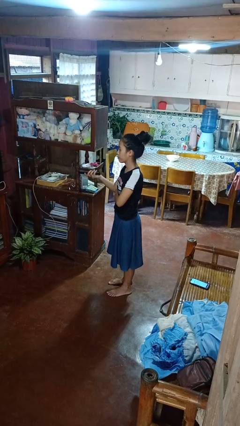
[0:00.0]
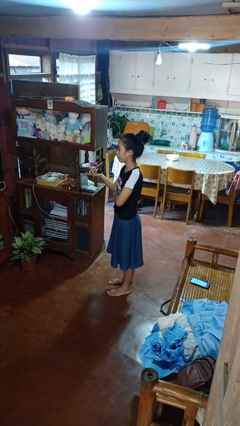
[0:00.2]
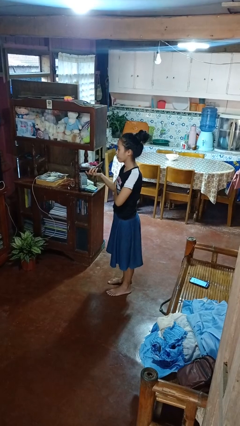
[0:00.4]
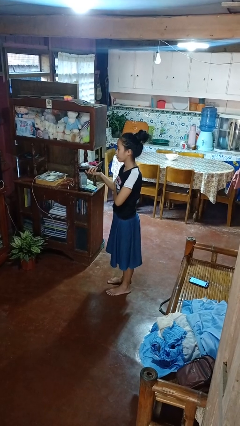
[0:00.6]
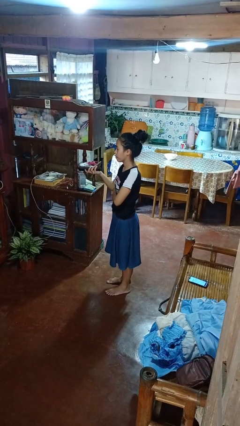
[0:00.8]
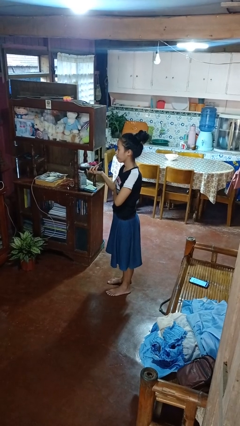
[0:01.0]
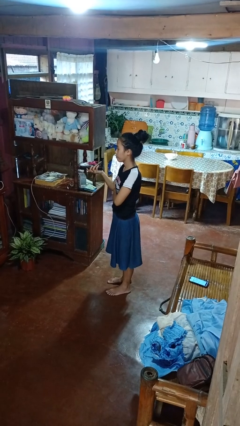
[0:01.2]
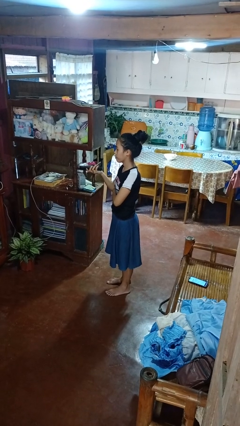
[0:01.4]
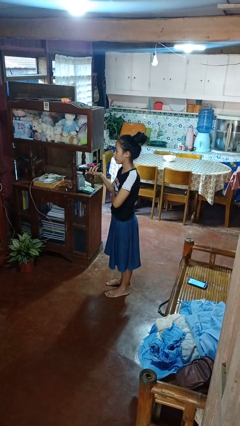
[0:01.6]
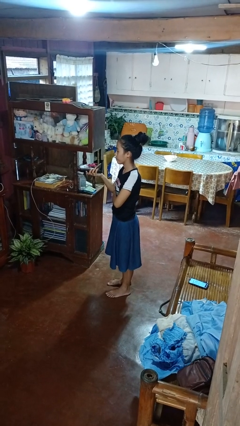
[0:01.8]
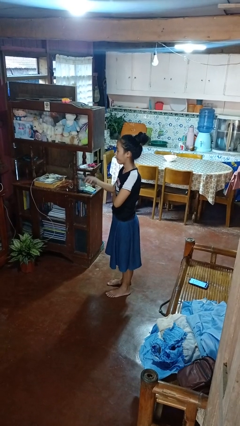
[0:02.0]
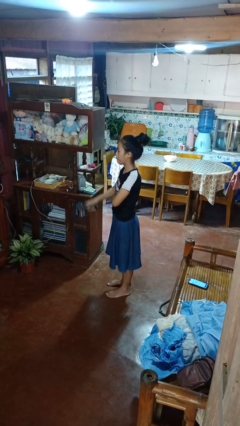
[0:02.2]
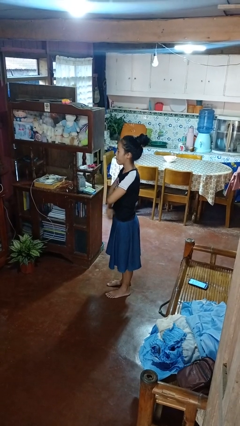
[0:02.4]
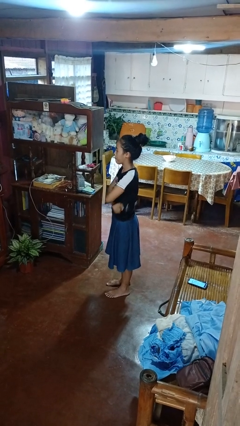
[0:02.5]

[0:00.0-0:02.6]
person uses television remote

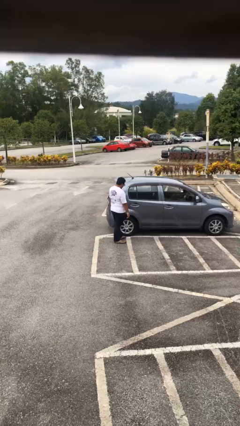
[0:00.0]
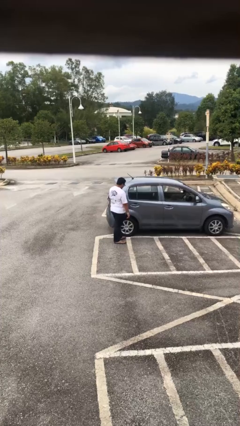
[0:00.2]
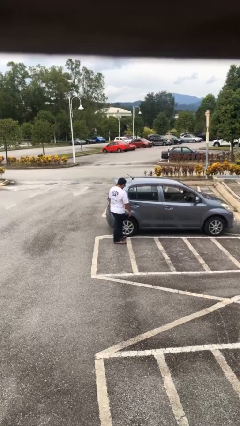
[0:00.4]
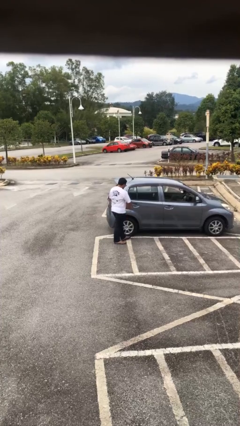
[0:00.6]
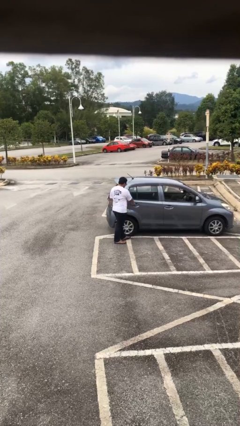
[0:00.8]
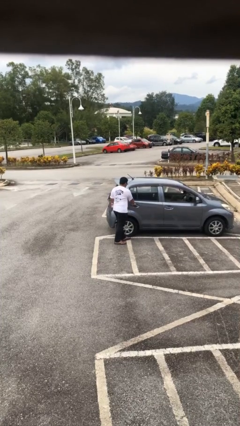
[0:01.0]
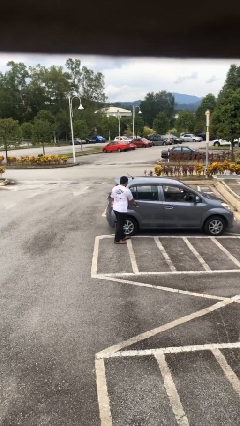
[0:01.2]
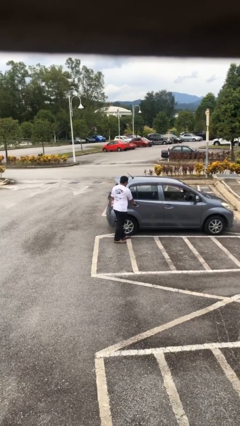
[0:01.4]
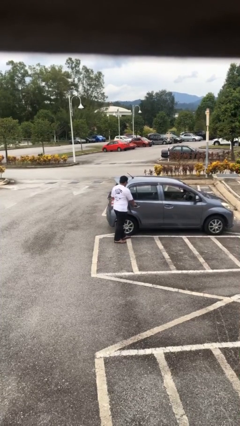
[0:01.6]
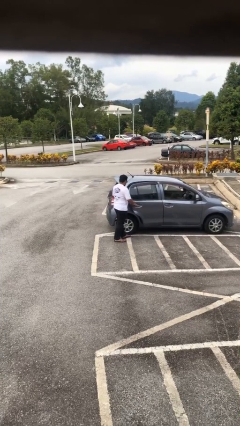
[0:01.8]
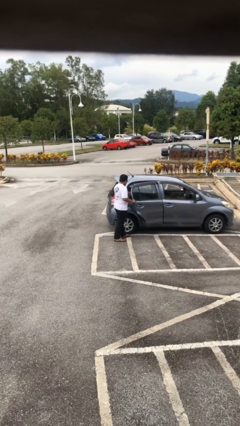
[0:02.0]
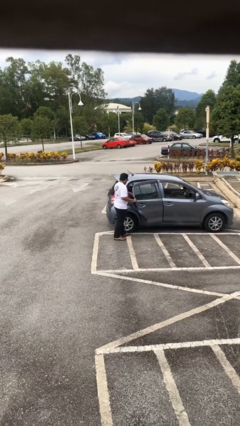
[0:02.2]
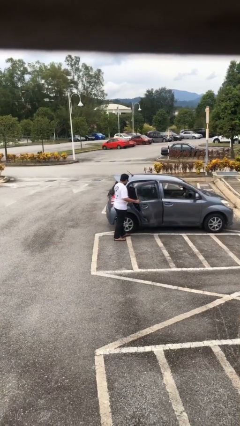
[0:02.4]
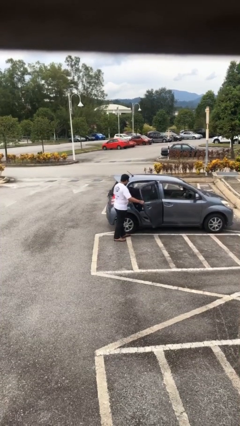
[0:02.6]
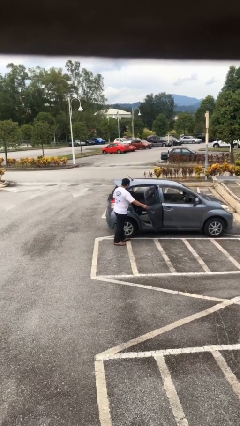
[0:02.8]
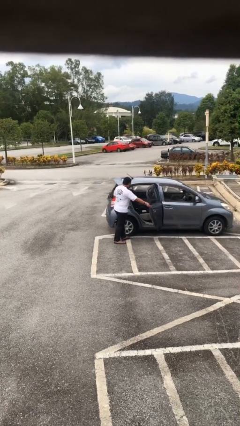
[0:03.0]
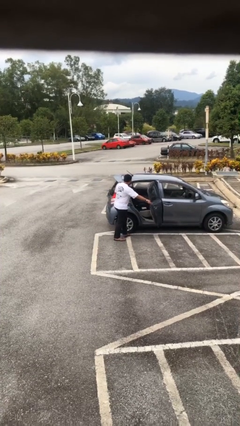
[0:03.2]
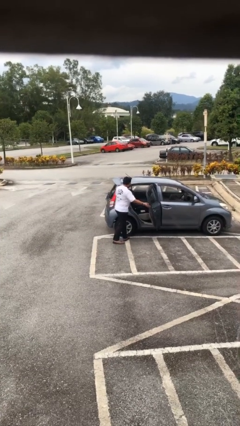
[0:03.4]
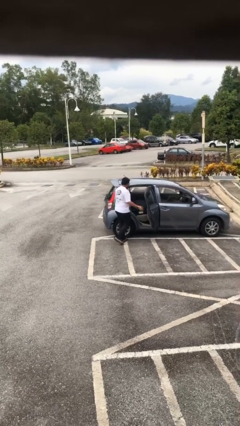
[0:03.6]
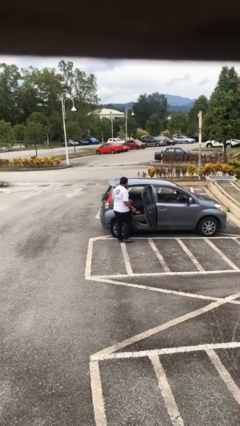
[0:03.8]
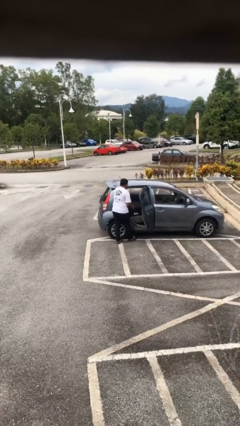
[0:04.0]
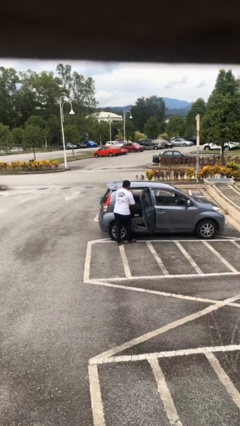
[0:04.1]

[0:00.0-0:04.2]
person opens car door

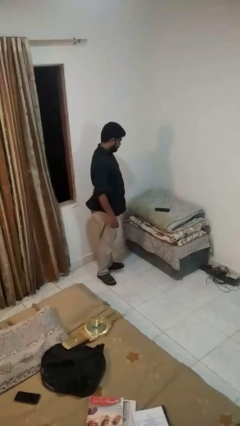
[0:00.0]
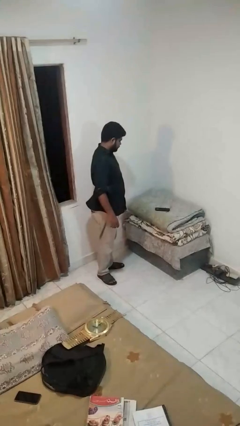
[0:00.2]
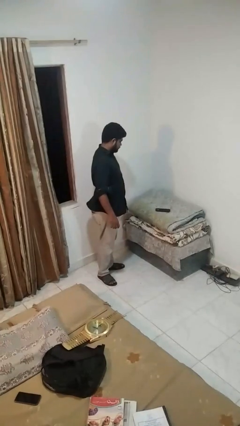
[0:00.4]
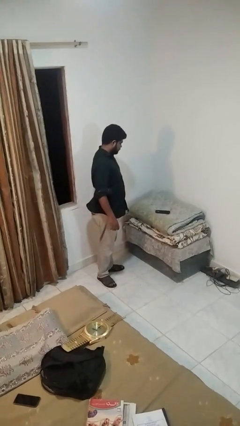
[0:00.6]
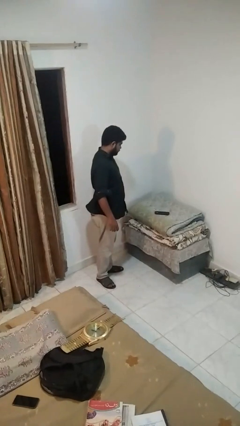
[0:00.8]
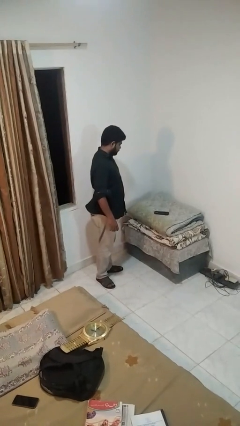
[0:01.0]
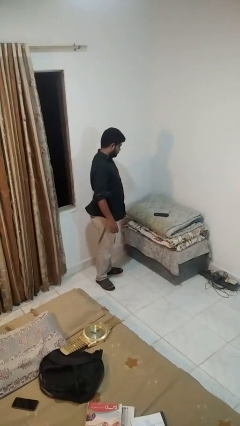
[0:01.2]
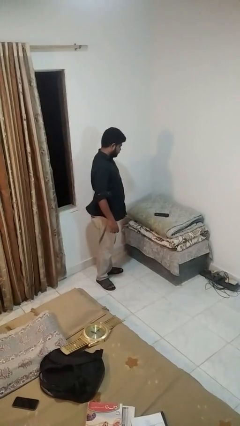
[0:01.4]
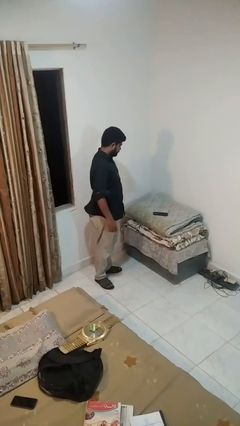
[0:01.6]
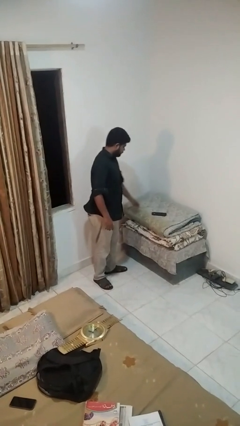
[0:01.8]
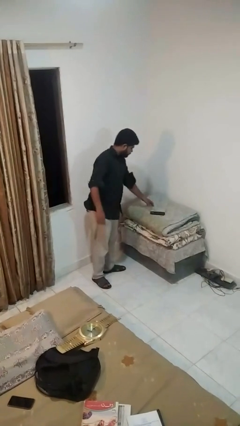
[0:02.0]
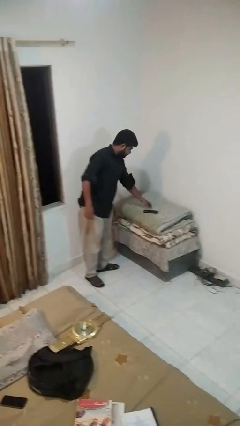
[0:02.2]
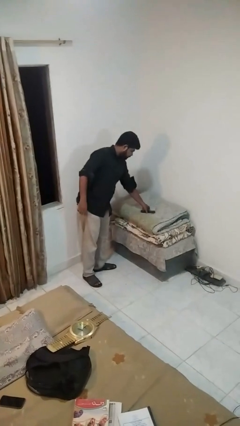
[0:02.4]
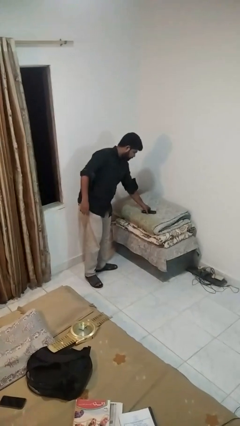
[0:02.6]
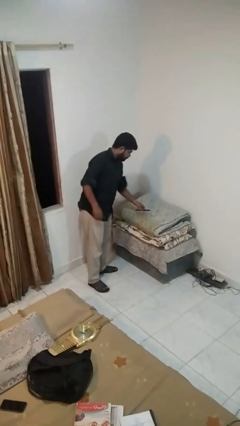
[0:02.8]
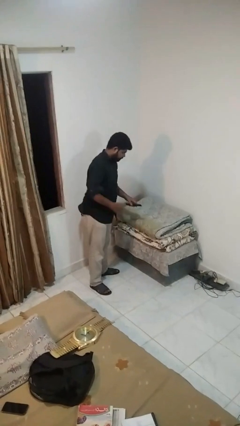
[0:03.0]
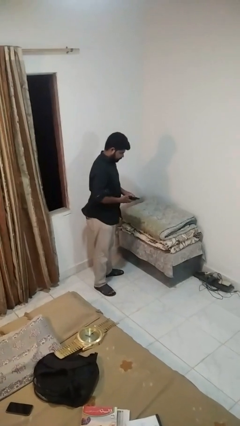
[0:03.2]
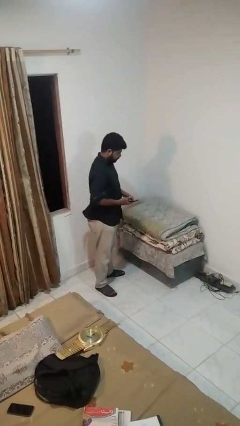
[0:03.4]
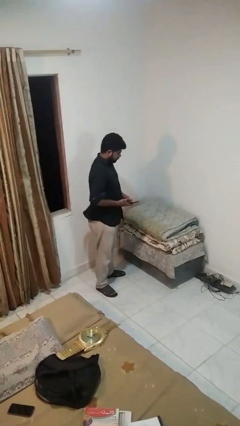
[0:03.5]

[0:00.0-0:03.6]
person picks up object from couch

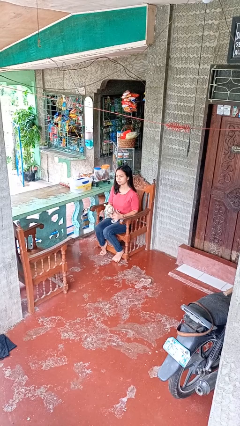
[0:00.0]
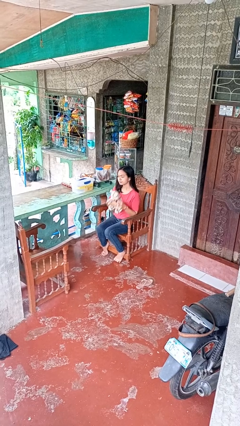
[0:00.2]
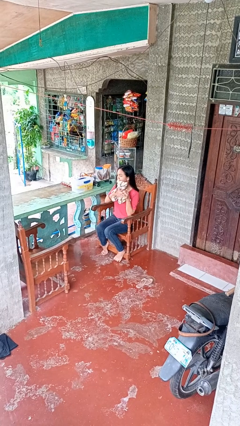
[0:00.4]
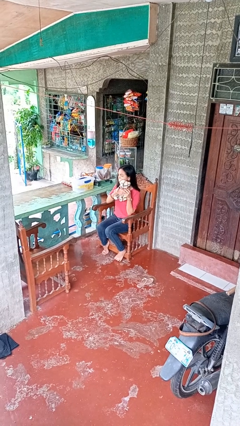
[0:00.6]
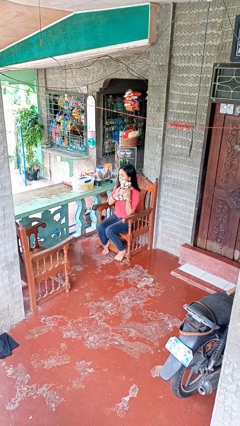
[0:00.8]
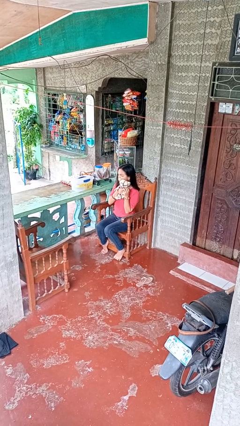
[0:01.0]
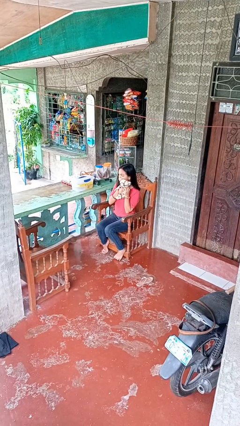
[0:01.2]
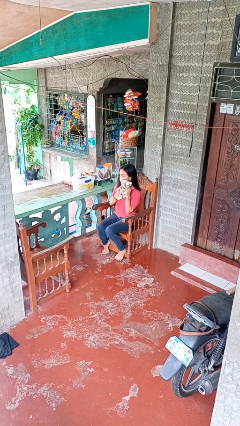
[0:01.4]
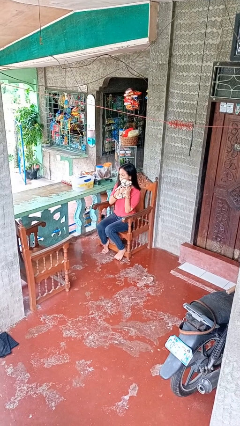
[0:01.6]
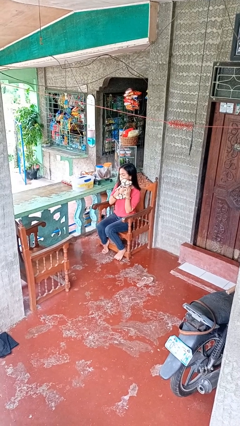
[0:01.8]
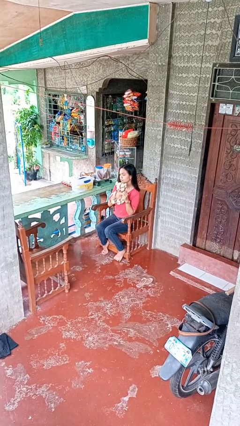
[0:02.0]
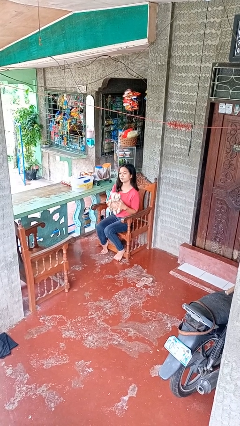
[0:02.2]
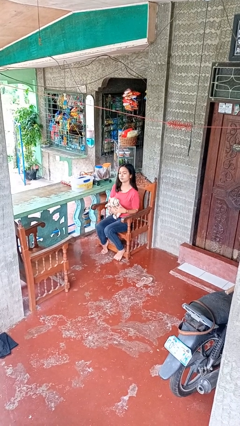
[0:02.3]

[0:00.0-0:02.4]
person hugs stuffed animal

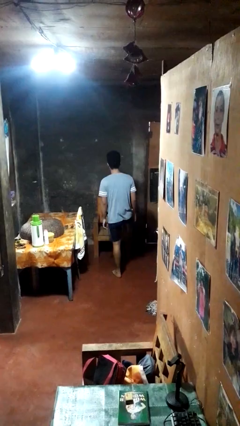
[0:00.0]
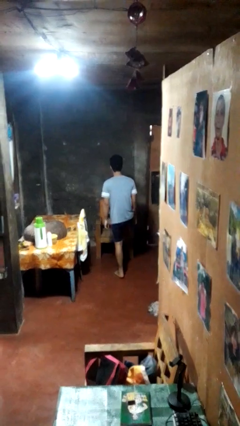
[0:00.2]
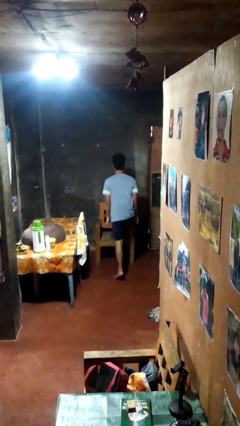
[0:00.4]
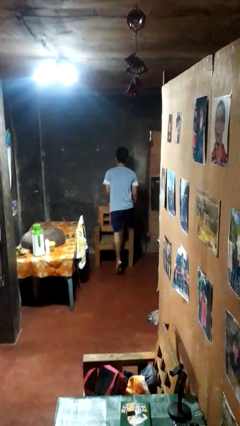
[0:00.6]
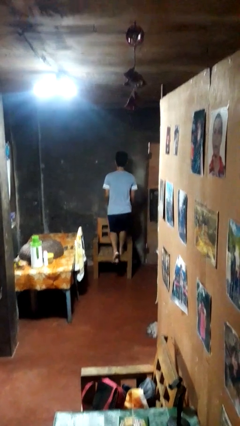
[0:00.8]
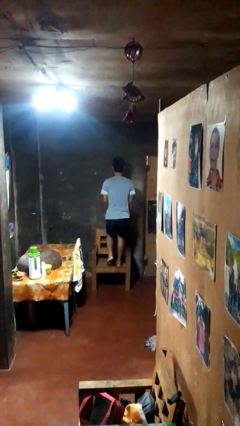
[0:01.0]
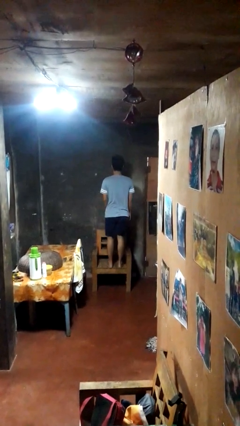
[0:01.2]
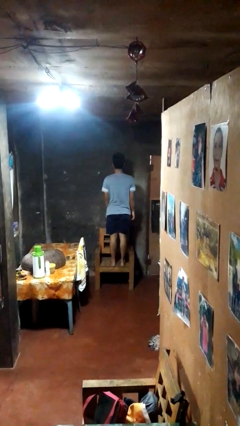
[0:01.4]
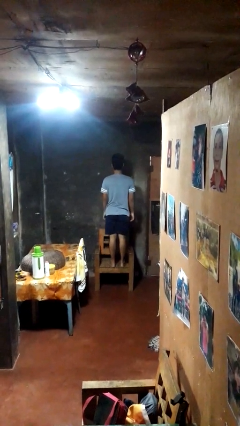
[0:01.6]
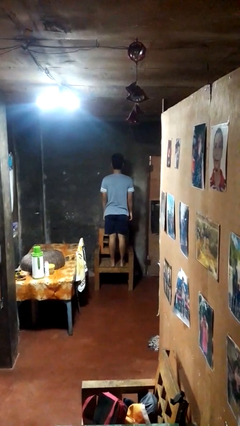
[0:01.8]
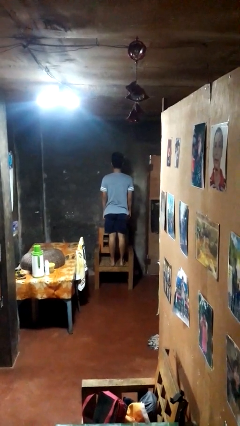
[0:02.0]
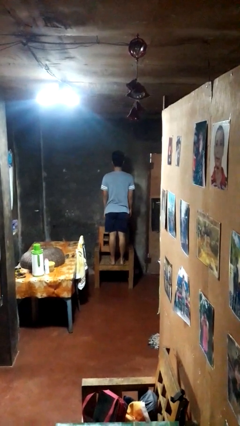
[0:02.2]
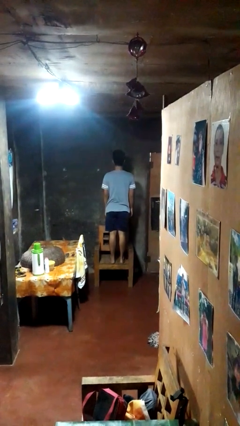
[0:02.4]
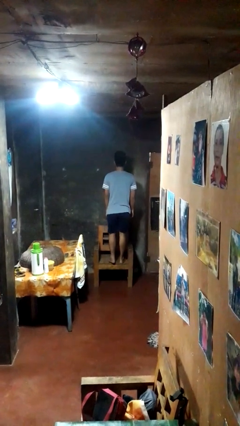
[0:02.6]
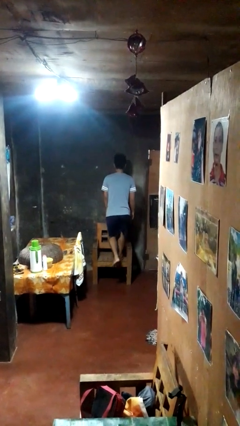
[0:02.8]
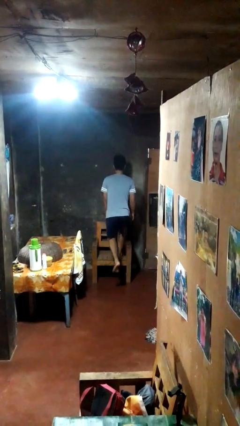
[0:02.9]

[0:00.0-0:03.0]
person climbs on chair

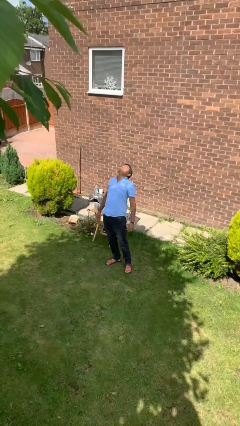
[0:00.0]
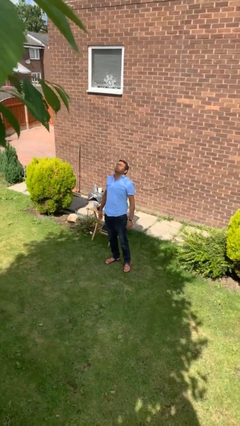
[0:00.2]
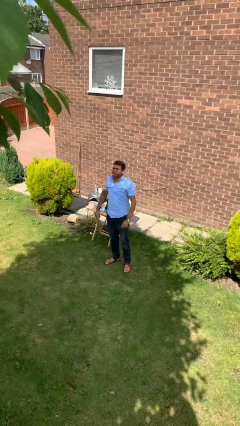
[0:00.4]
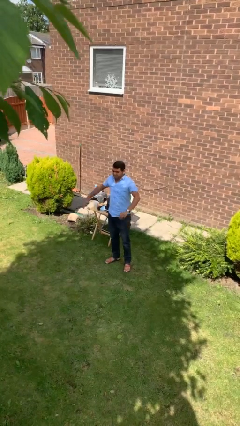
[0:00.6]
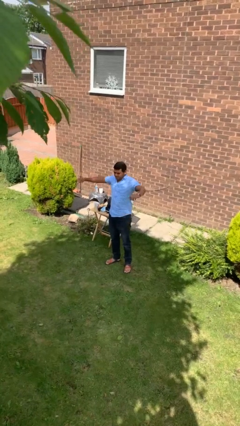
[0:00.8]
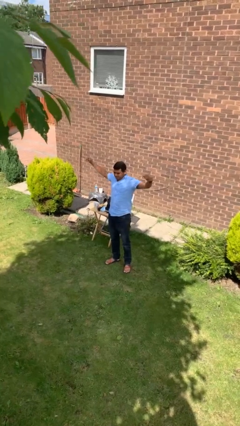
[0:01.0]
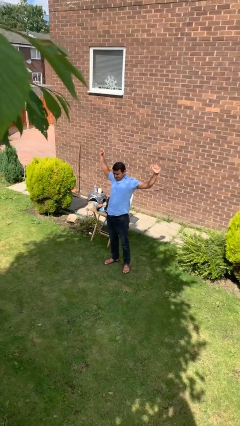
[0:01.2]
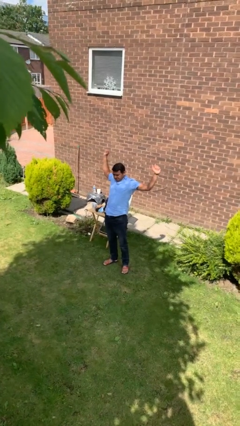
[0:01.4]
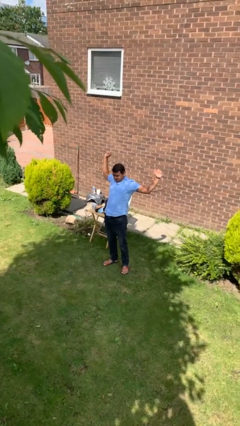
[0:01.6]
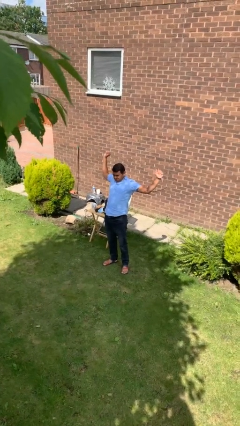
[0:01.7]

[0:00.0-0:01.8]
person stretches arms to side
